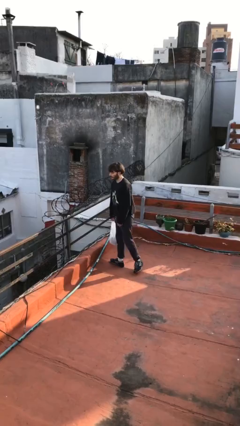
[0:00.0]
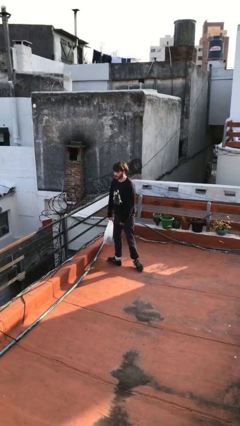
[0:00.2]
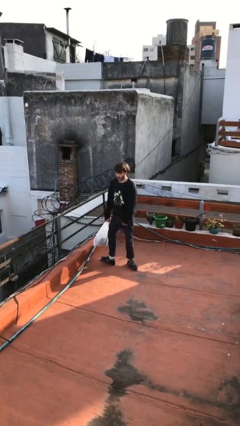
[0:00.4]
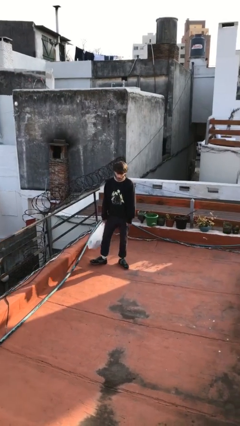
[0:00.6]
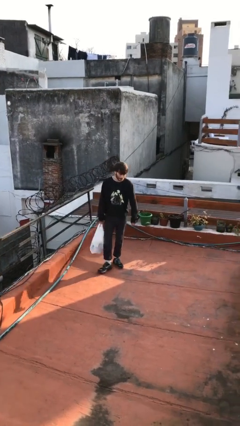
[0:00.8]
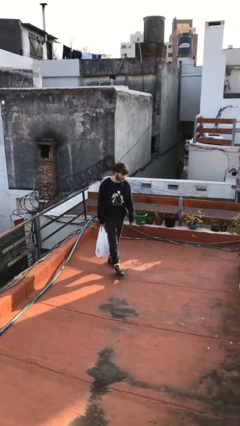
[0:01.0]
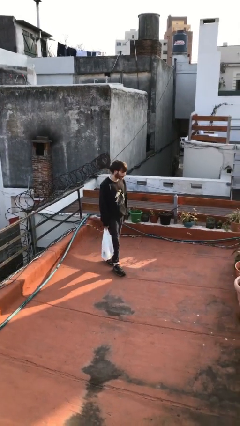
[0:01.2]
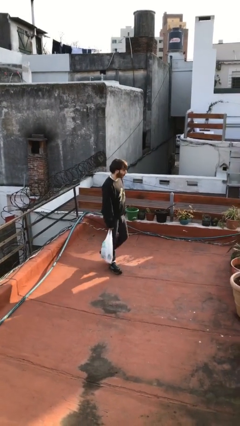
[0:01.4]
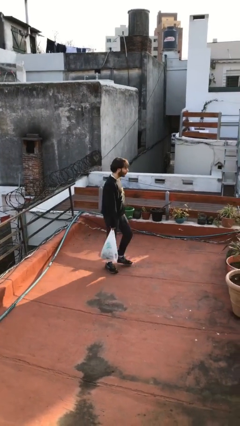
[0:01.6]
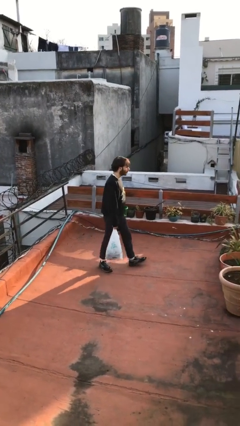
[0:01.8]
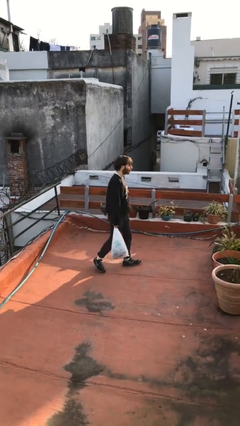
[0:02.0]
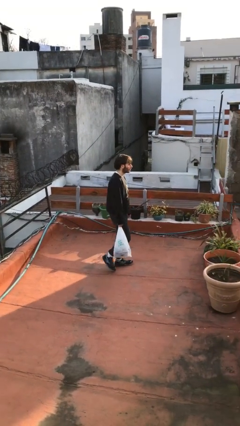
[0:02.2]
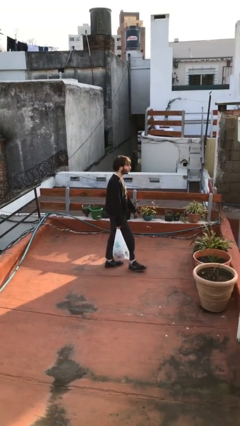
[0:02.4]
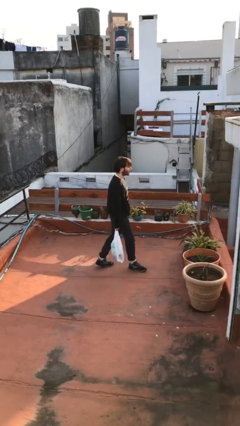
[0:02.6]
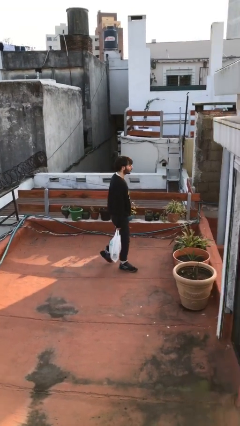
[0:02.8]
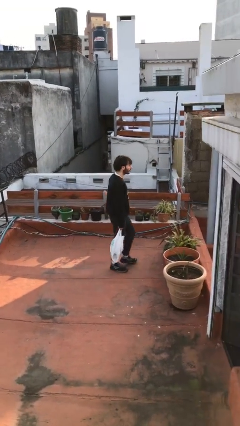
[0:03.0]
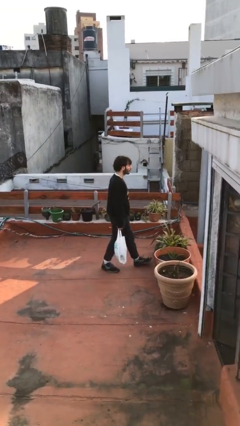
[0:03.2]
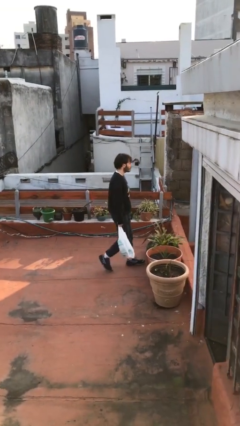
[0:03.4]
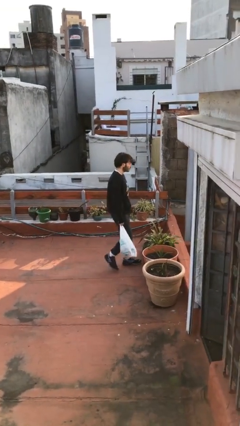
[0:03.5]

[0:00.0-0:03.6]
person carries groceries

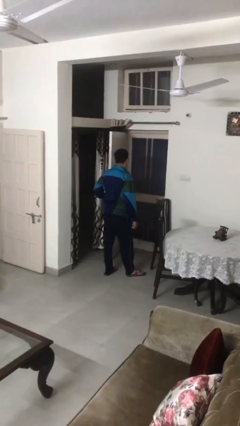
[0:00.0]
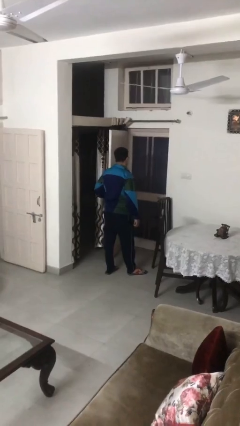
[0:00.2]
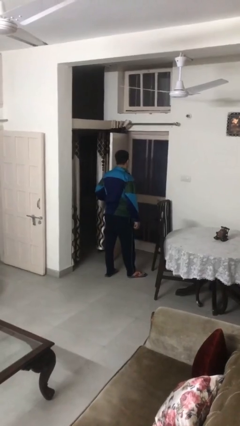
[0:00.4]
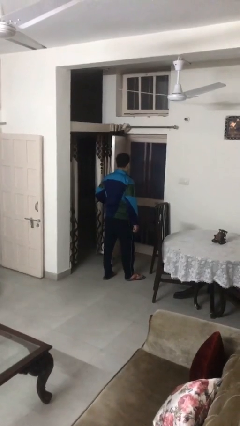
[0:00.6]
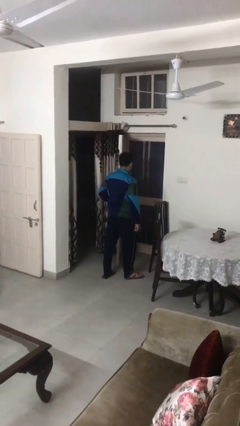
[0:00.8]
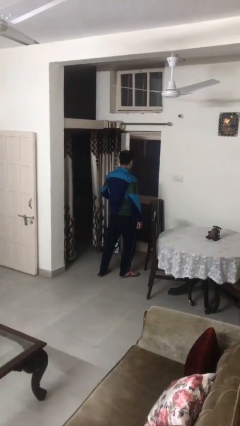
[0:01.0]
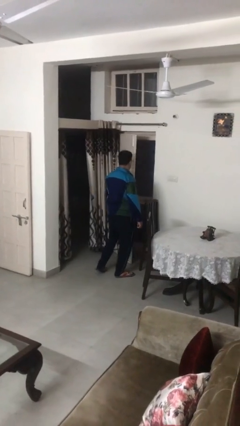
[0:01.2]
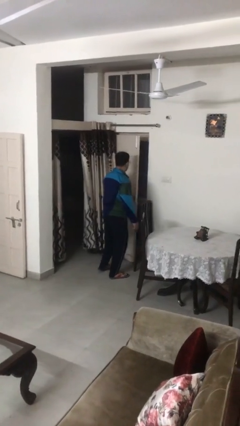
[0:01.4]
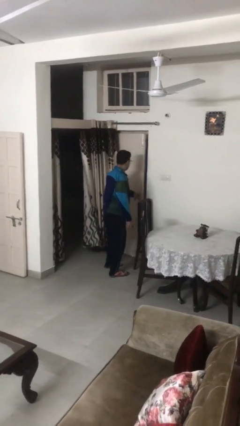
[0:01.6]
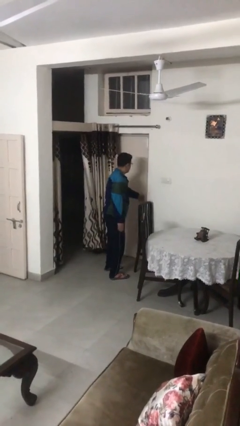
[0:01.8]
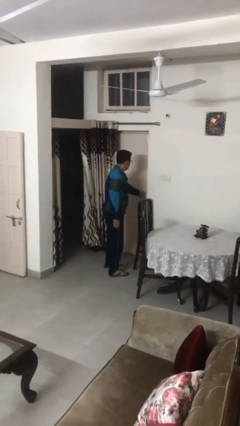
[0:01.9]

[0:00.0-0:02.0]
person closes facility door

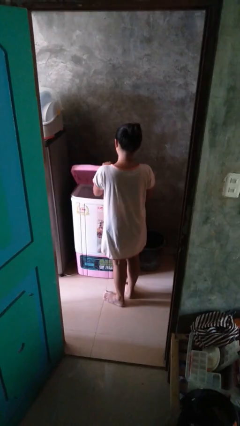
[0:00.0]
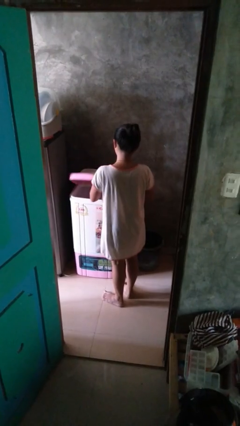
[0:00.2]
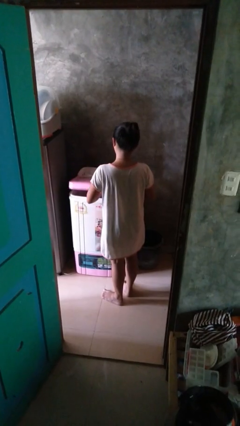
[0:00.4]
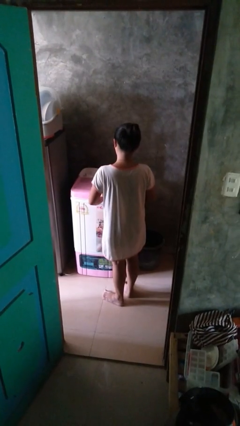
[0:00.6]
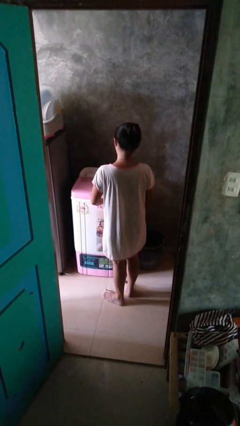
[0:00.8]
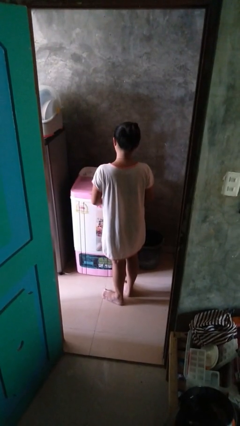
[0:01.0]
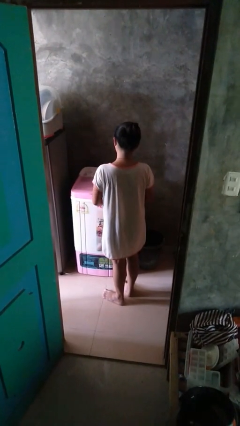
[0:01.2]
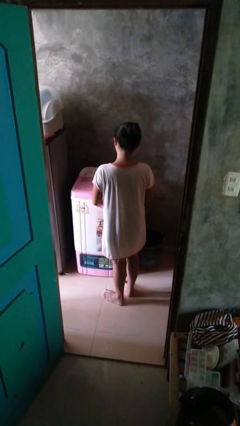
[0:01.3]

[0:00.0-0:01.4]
person closes clothes washer

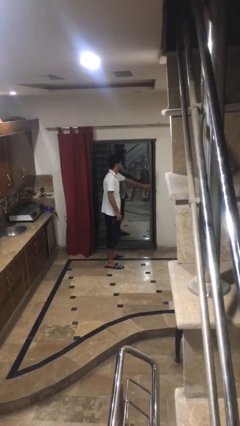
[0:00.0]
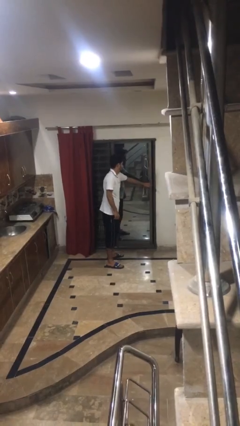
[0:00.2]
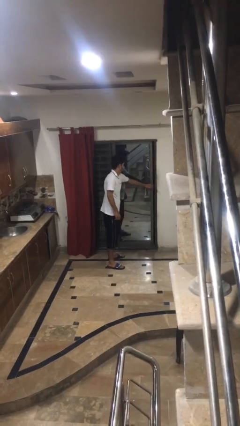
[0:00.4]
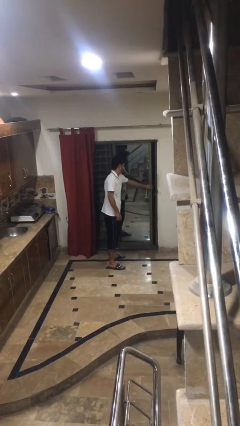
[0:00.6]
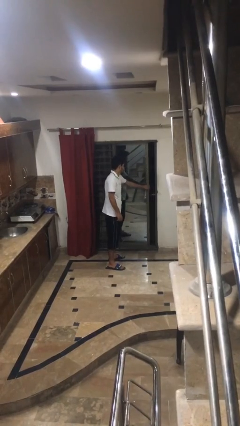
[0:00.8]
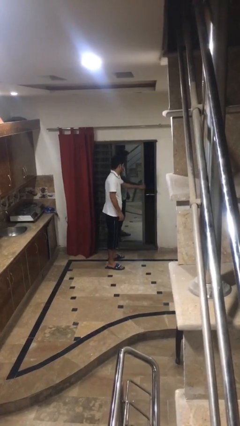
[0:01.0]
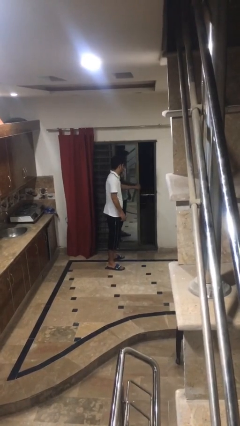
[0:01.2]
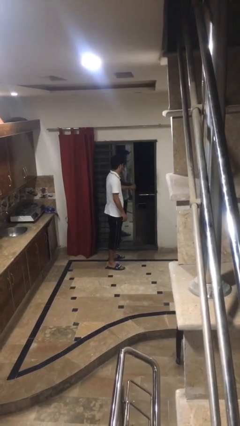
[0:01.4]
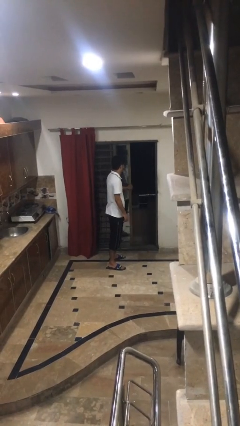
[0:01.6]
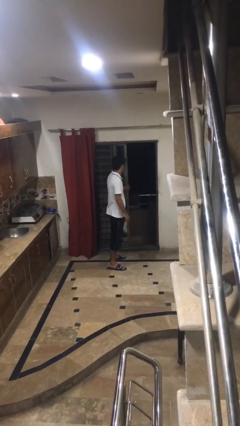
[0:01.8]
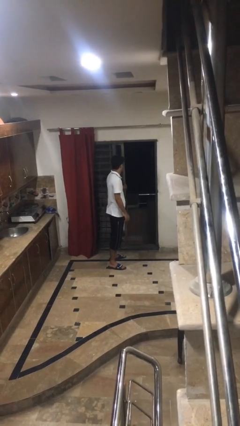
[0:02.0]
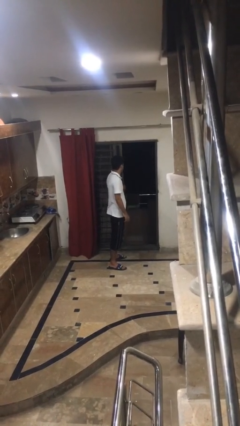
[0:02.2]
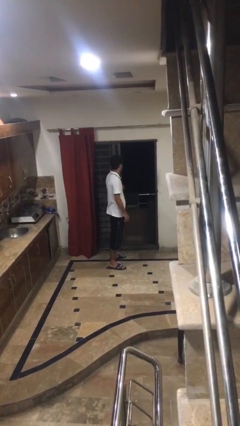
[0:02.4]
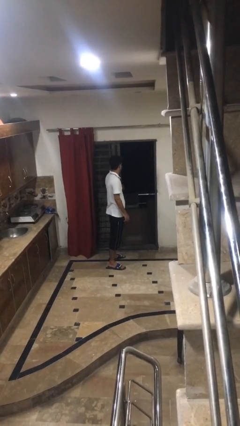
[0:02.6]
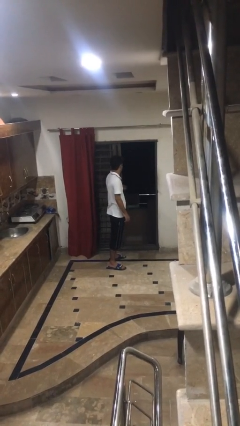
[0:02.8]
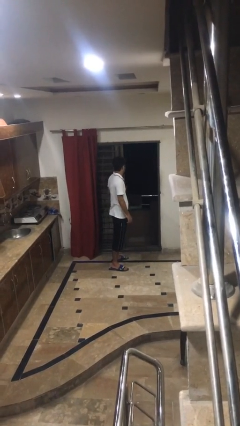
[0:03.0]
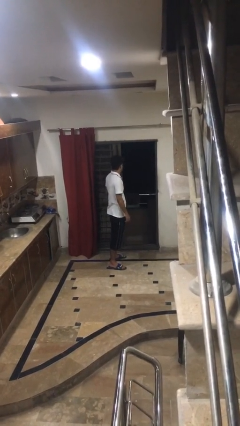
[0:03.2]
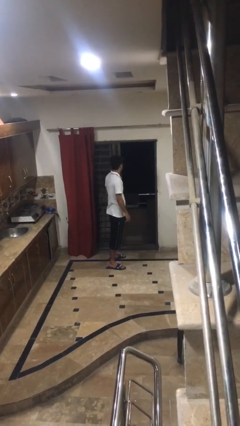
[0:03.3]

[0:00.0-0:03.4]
person opens sliding door

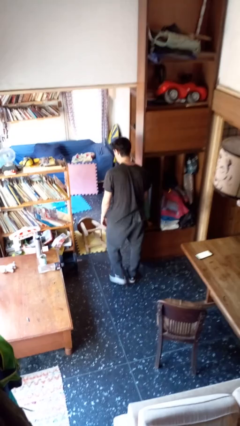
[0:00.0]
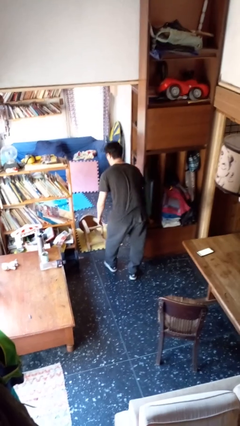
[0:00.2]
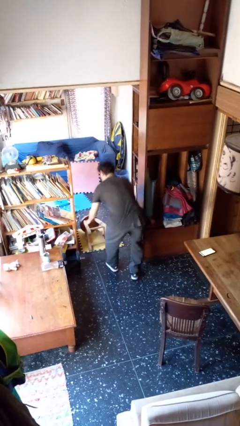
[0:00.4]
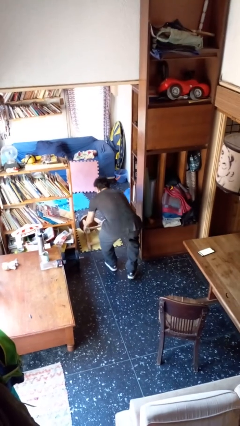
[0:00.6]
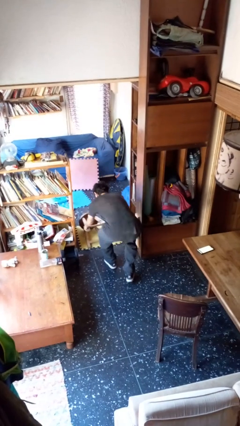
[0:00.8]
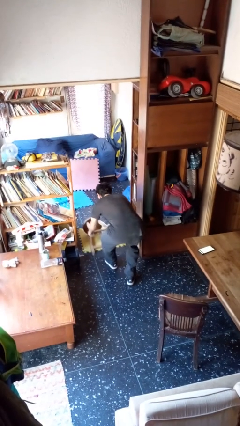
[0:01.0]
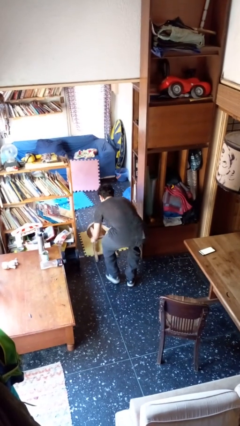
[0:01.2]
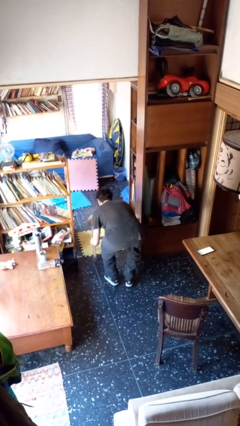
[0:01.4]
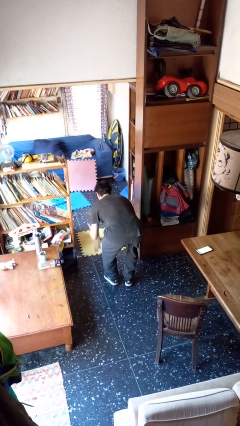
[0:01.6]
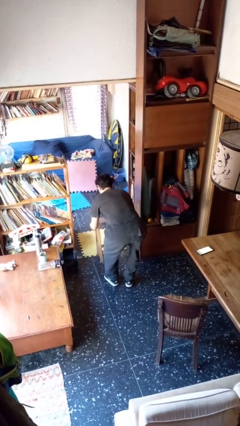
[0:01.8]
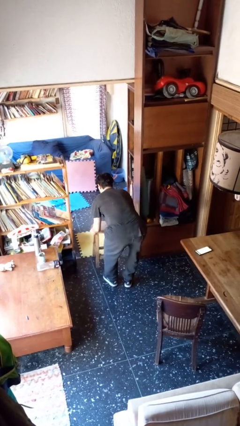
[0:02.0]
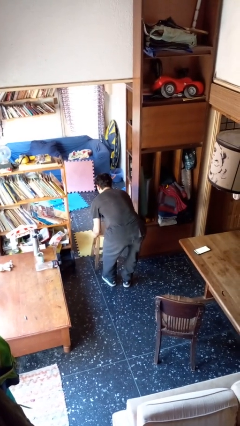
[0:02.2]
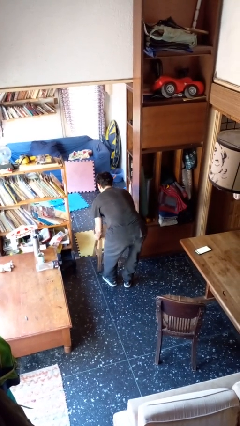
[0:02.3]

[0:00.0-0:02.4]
person sets upright furniture

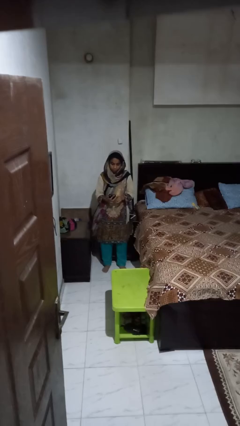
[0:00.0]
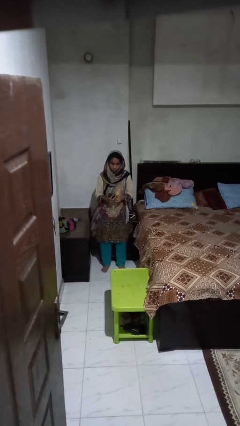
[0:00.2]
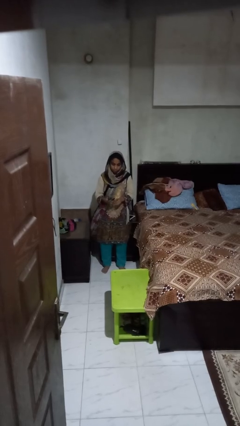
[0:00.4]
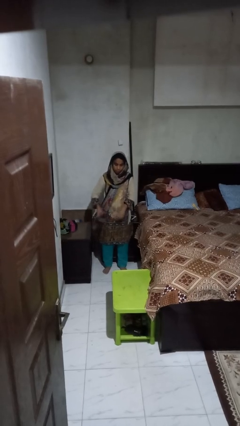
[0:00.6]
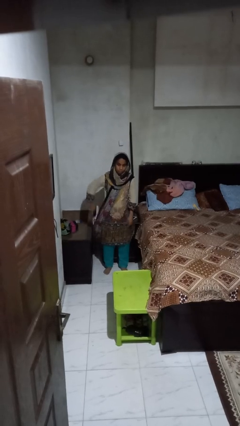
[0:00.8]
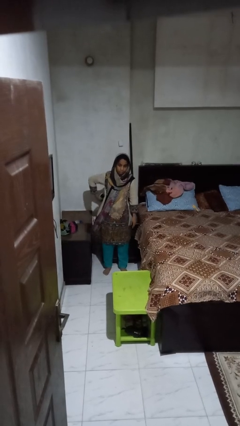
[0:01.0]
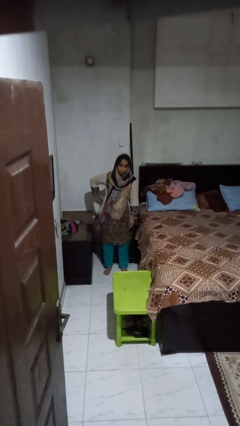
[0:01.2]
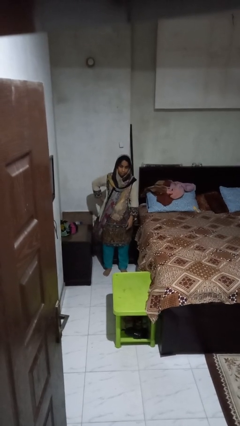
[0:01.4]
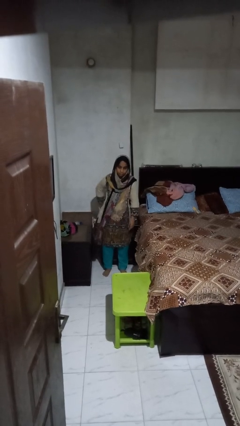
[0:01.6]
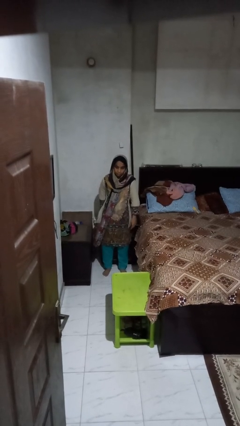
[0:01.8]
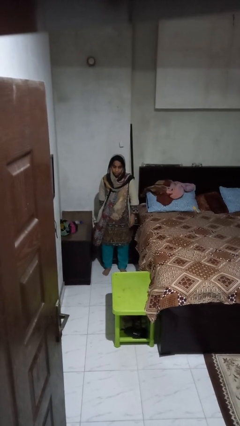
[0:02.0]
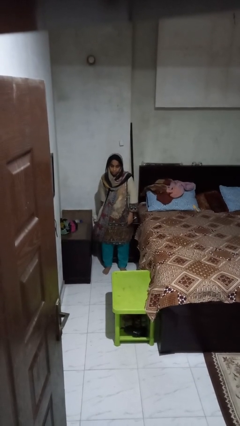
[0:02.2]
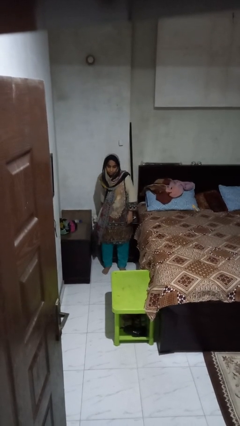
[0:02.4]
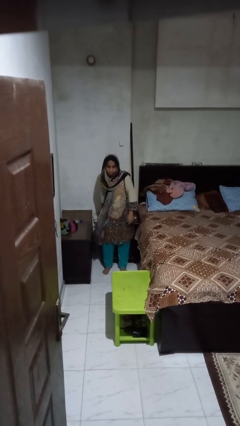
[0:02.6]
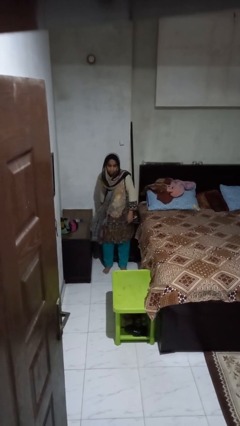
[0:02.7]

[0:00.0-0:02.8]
person puts phone into pocket

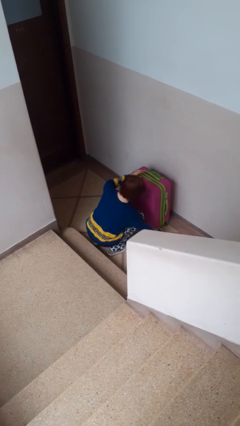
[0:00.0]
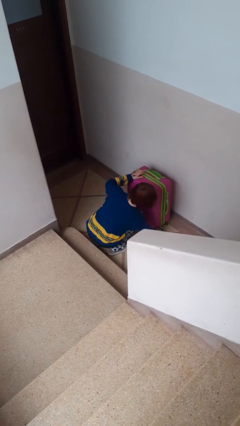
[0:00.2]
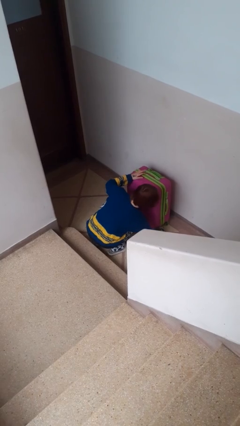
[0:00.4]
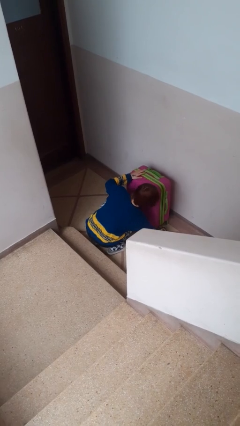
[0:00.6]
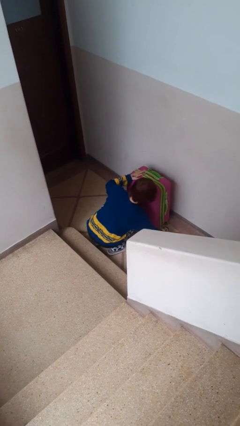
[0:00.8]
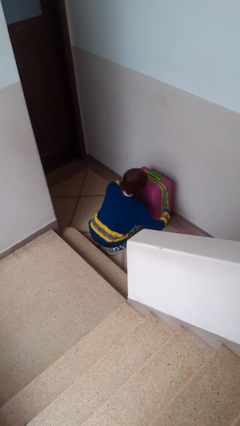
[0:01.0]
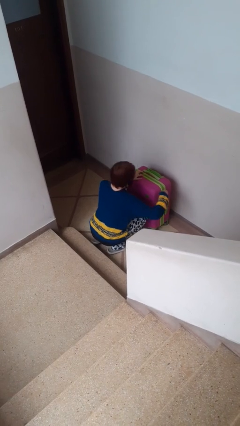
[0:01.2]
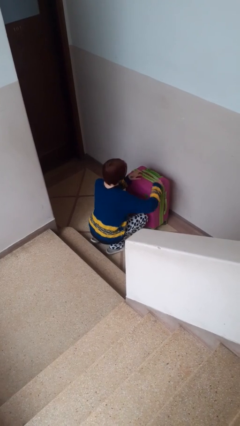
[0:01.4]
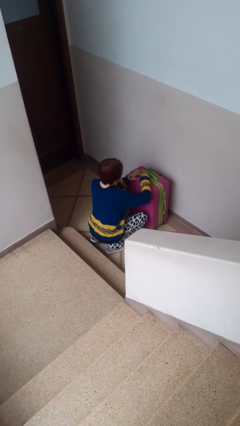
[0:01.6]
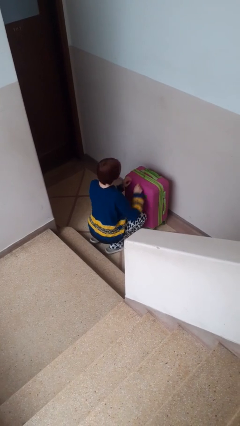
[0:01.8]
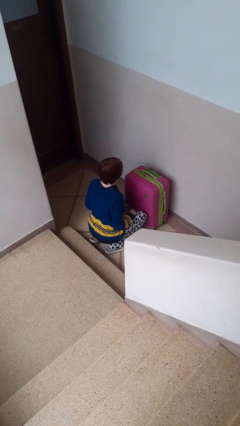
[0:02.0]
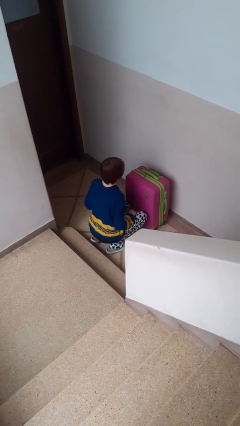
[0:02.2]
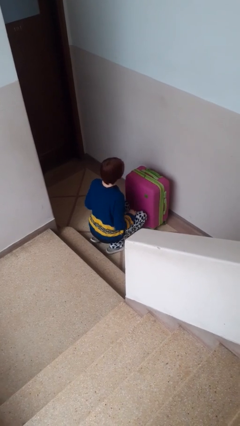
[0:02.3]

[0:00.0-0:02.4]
person closes suitcase
